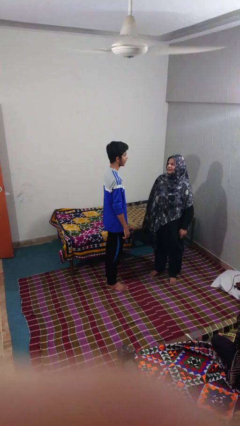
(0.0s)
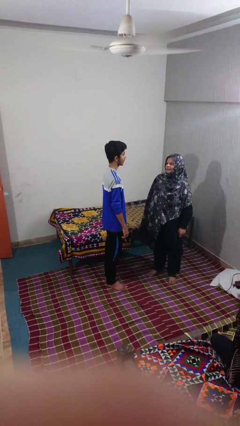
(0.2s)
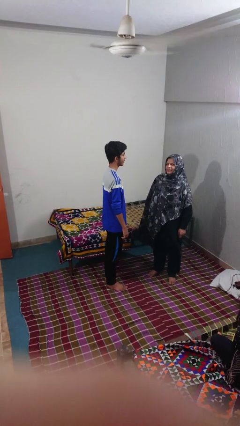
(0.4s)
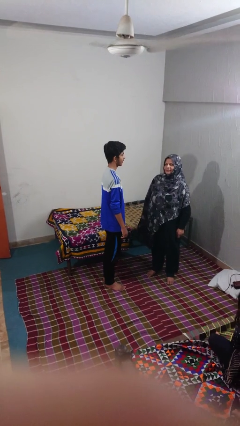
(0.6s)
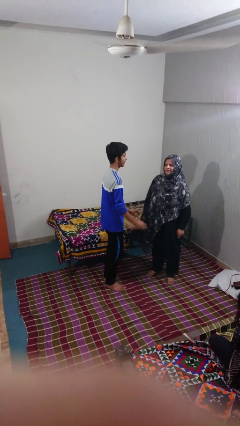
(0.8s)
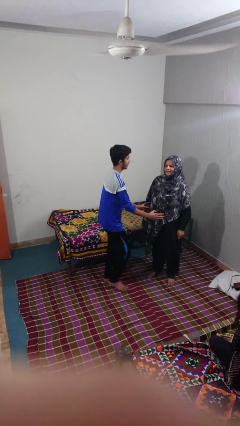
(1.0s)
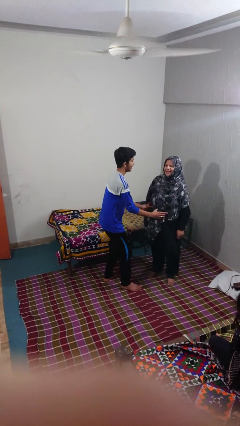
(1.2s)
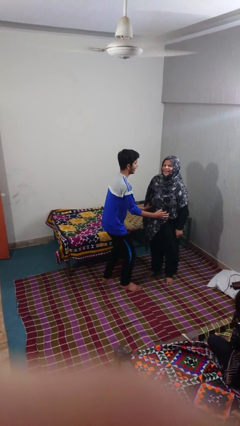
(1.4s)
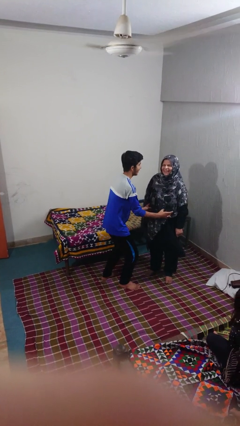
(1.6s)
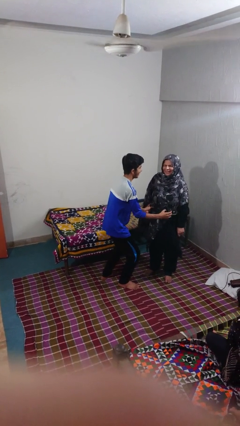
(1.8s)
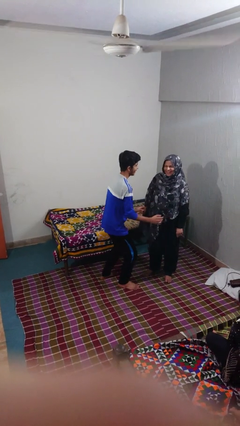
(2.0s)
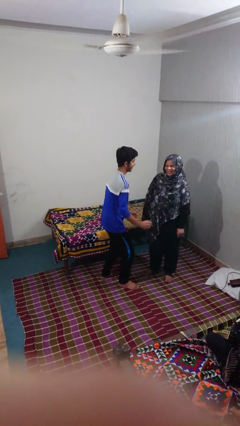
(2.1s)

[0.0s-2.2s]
person tickles person

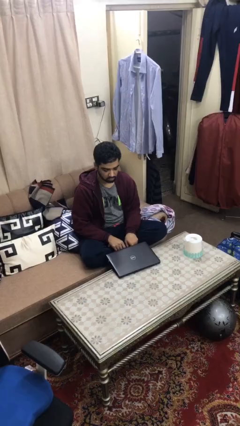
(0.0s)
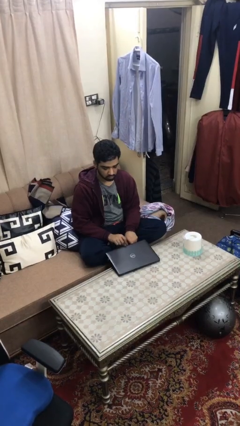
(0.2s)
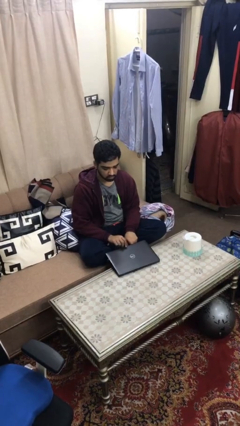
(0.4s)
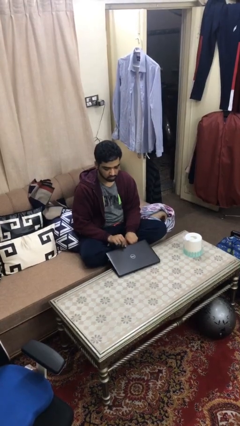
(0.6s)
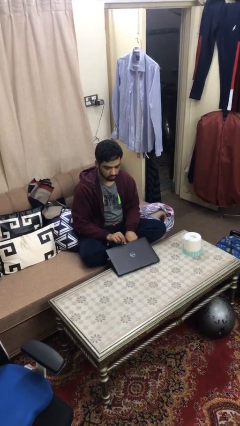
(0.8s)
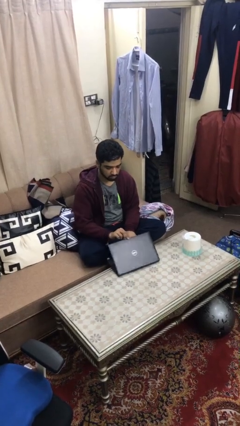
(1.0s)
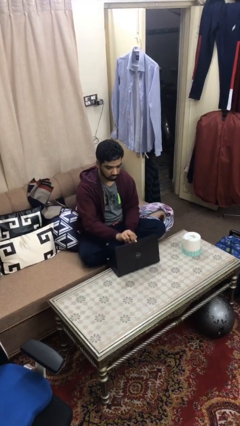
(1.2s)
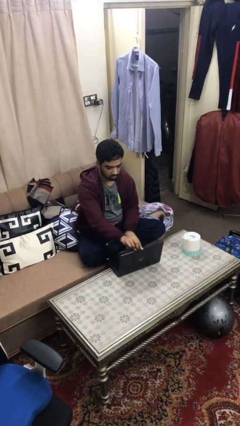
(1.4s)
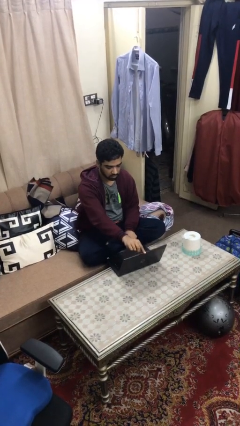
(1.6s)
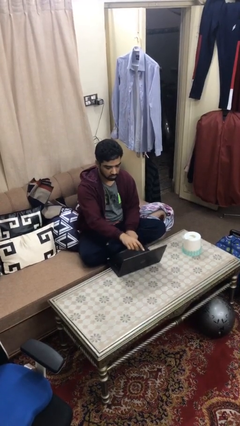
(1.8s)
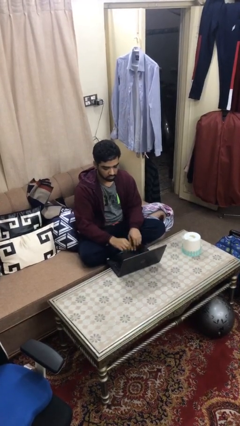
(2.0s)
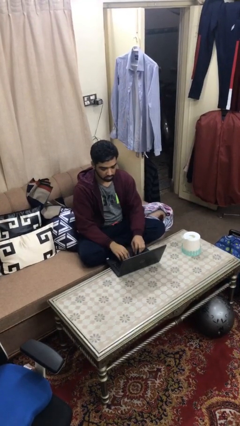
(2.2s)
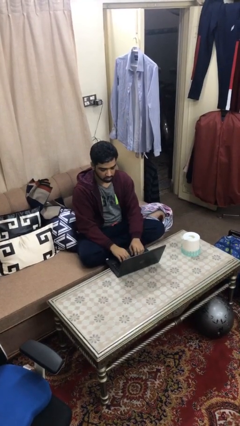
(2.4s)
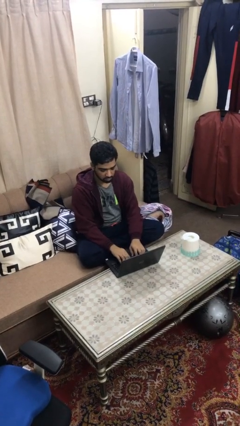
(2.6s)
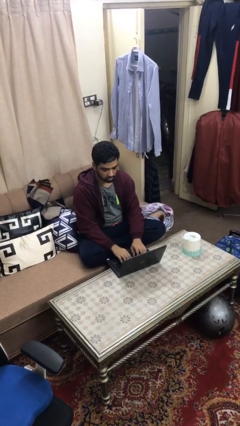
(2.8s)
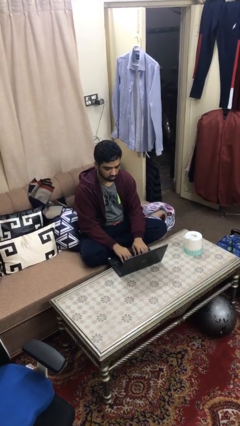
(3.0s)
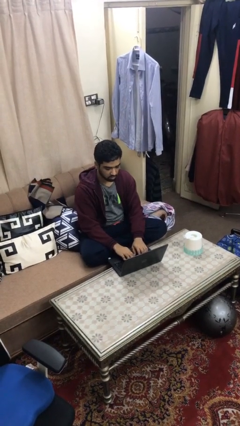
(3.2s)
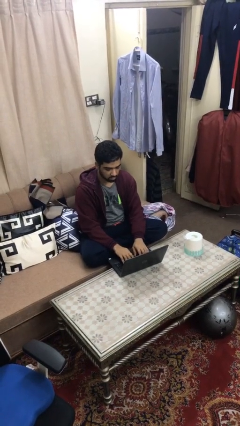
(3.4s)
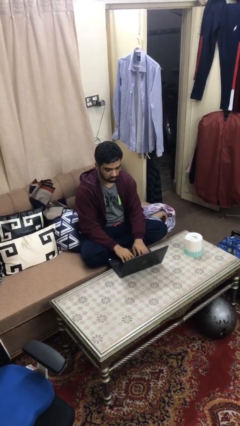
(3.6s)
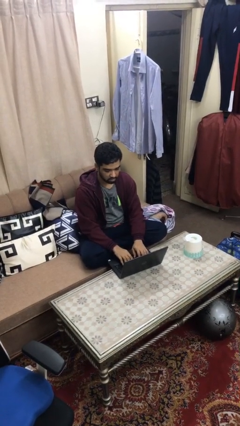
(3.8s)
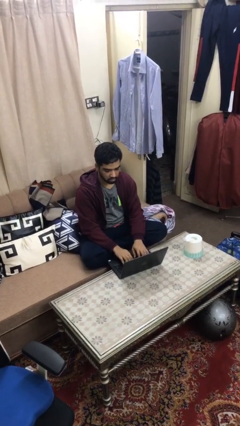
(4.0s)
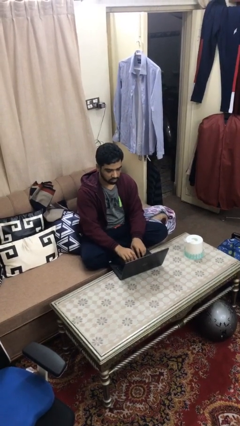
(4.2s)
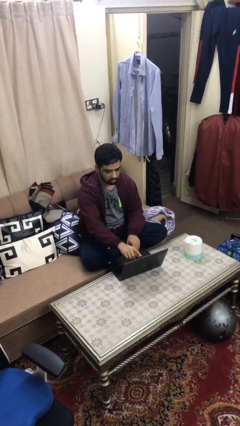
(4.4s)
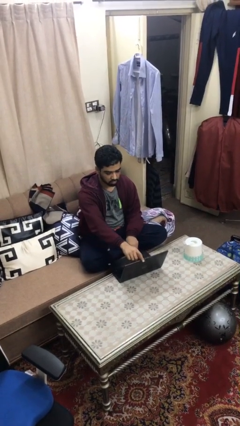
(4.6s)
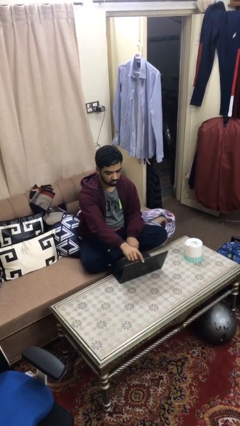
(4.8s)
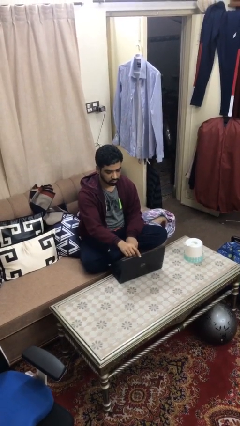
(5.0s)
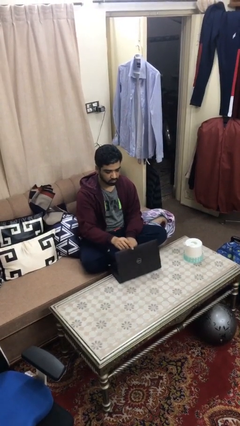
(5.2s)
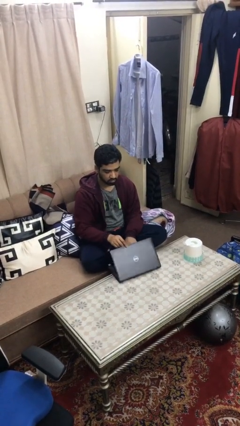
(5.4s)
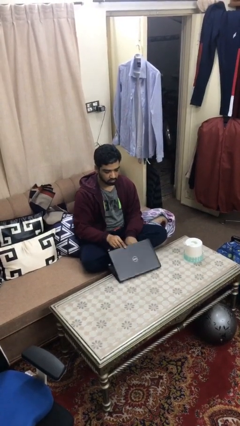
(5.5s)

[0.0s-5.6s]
person interacts with laptop

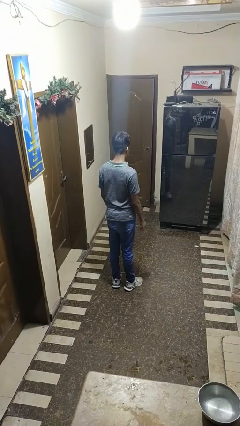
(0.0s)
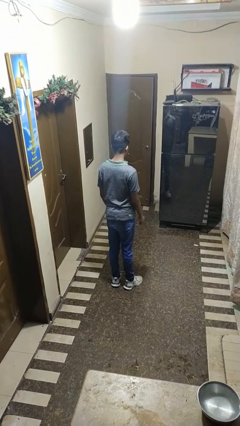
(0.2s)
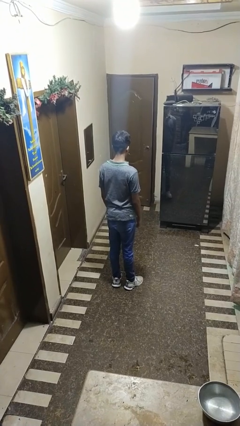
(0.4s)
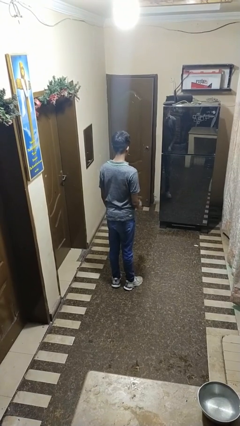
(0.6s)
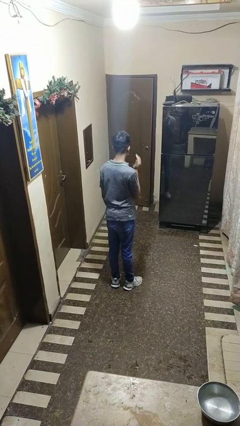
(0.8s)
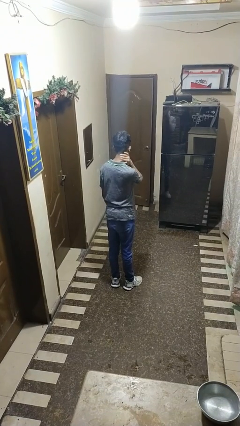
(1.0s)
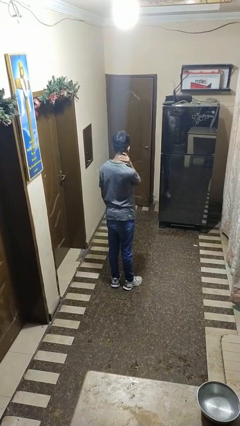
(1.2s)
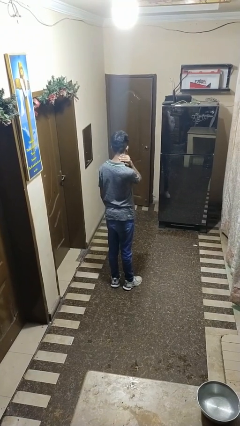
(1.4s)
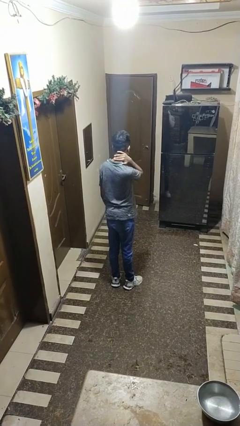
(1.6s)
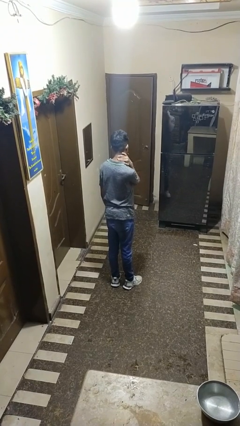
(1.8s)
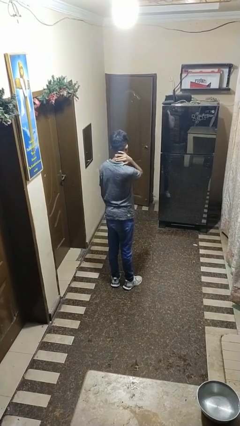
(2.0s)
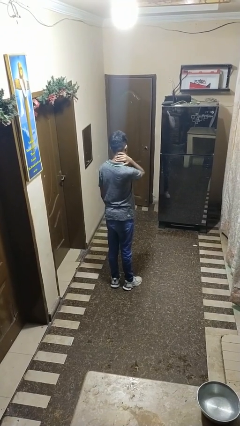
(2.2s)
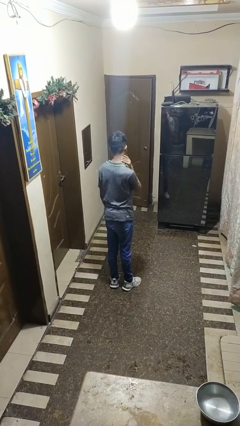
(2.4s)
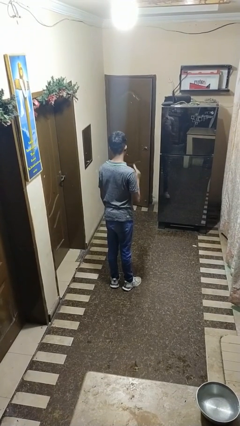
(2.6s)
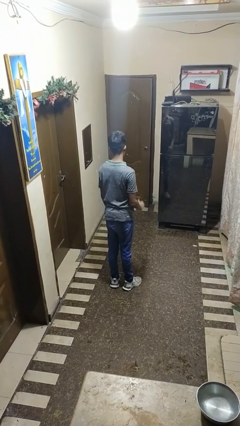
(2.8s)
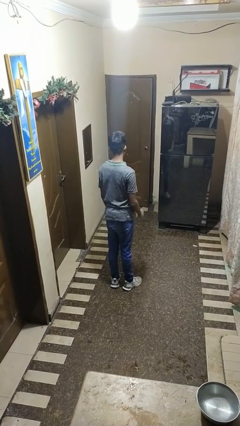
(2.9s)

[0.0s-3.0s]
person rubs neck

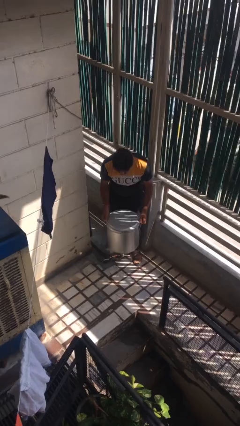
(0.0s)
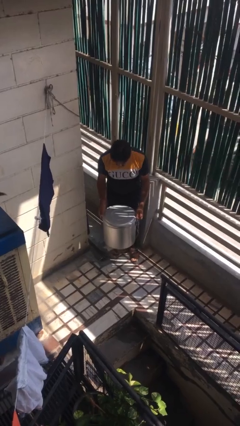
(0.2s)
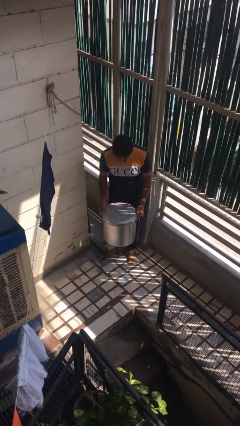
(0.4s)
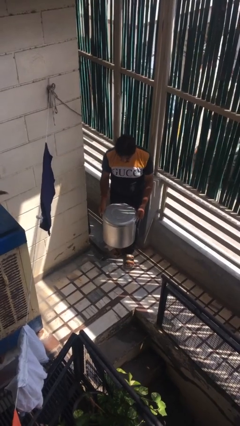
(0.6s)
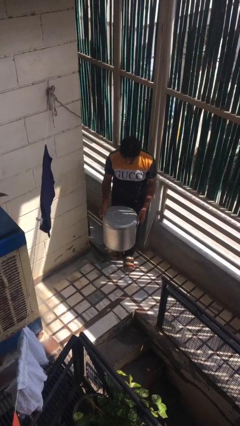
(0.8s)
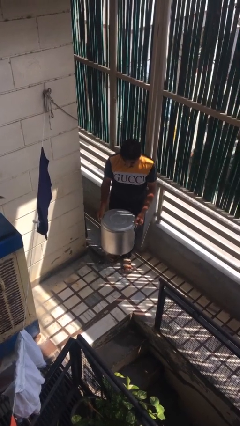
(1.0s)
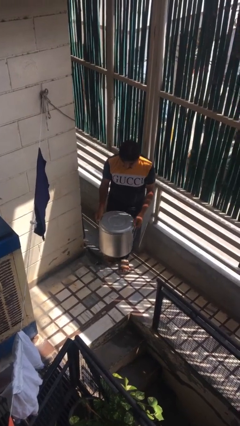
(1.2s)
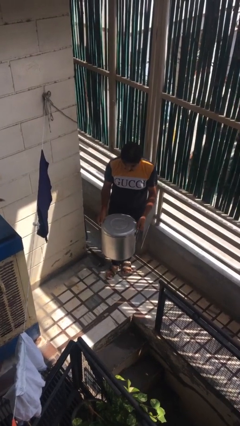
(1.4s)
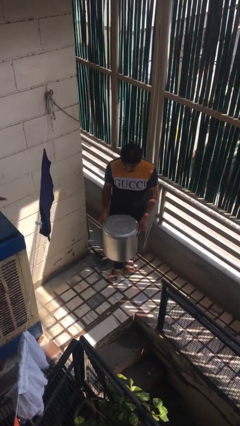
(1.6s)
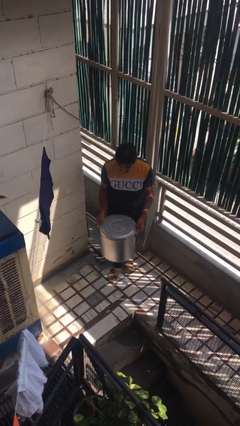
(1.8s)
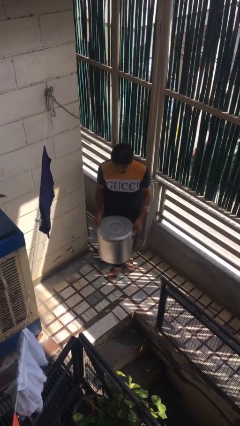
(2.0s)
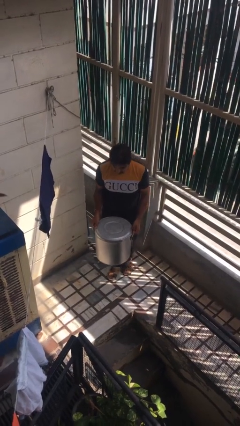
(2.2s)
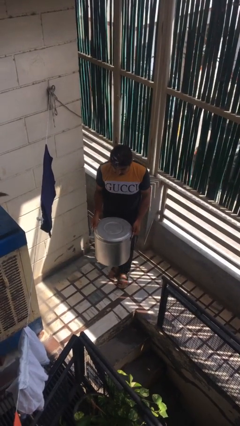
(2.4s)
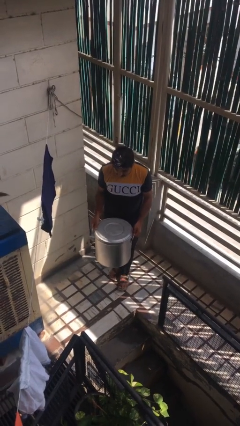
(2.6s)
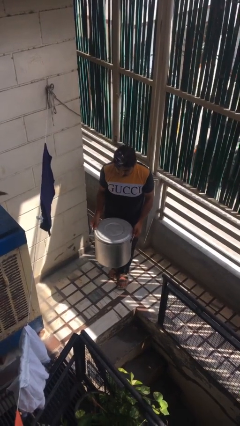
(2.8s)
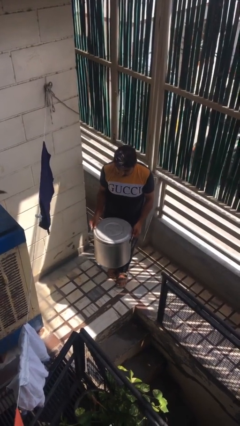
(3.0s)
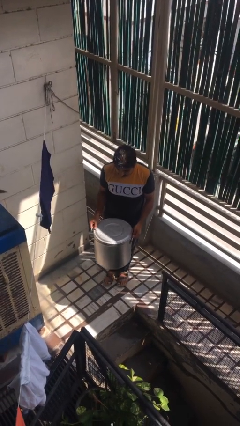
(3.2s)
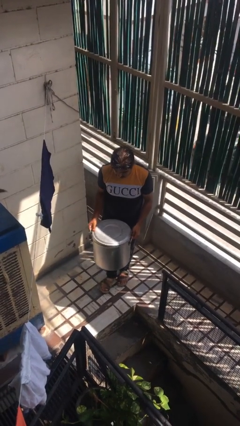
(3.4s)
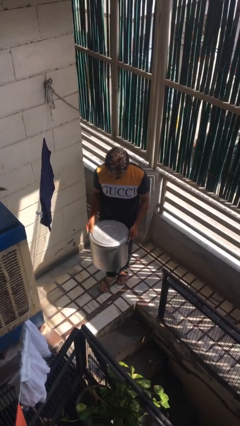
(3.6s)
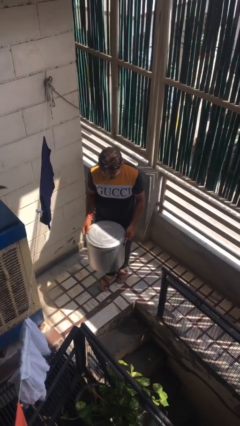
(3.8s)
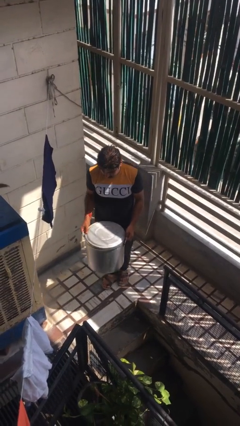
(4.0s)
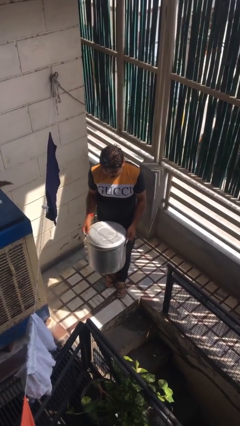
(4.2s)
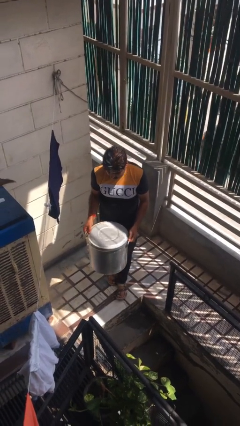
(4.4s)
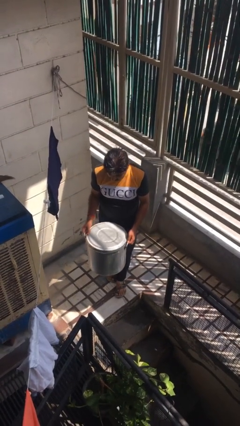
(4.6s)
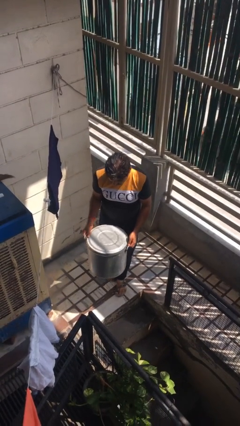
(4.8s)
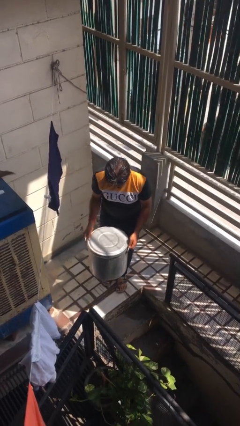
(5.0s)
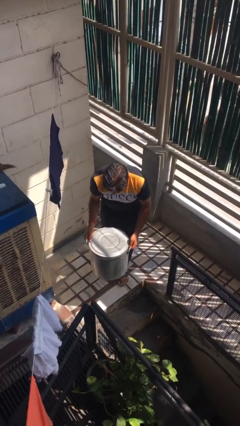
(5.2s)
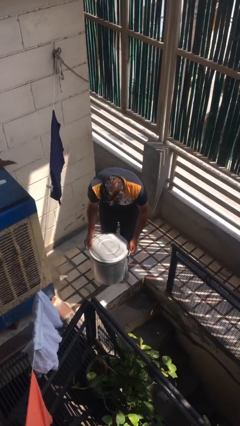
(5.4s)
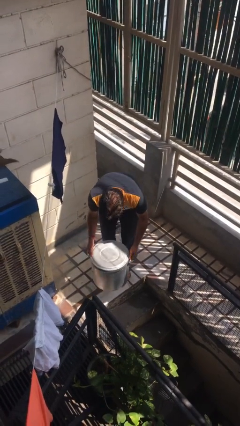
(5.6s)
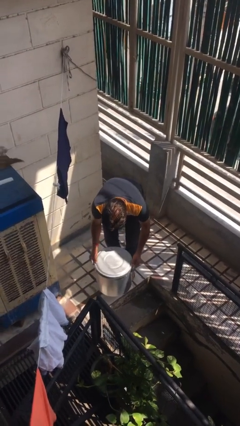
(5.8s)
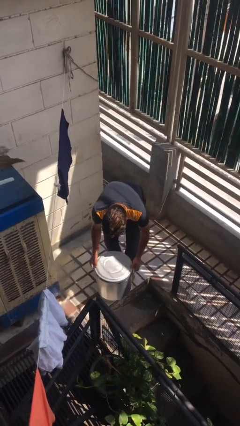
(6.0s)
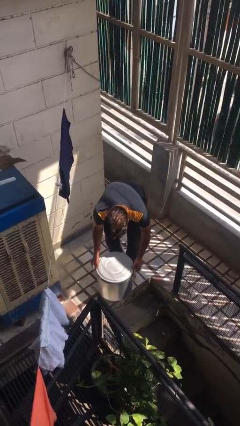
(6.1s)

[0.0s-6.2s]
person carries heavy object

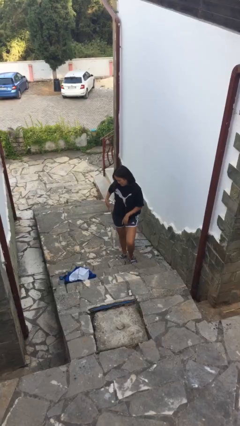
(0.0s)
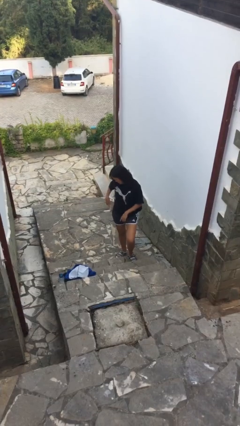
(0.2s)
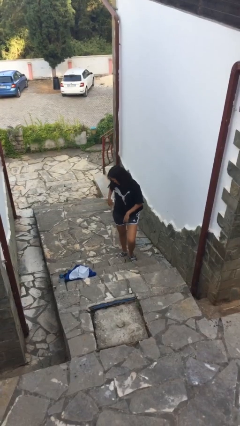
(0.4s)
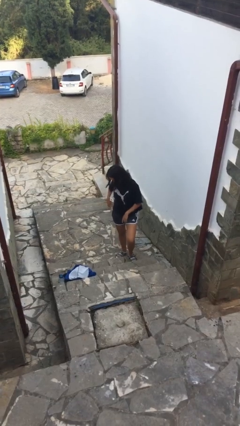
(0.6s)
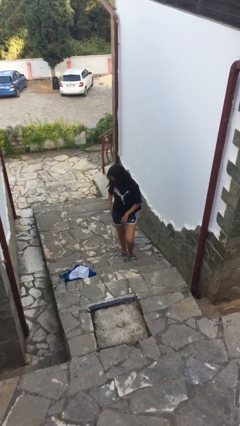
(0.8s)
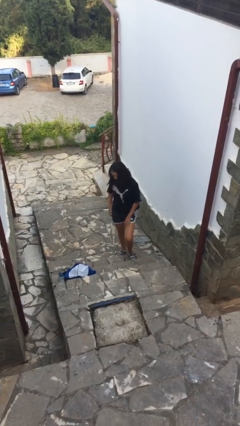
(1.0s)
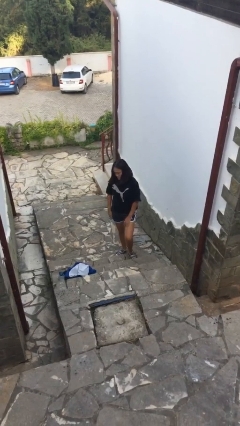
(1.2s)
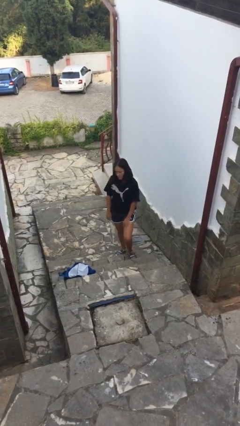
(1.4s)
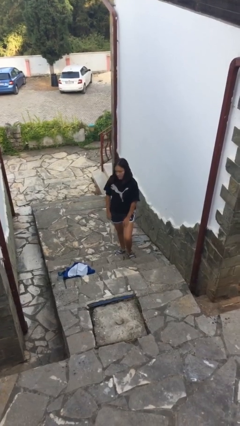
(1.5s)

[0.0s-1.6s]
person puts phone into pocket
